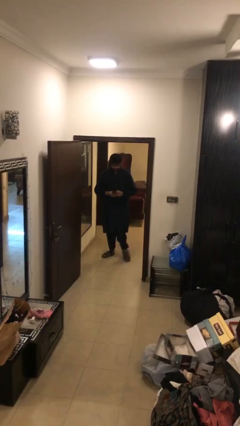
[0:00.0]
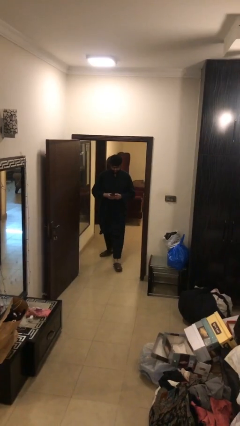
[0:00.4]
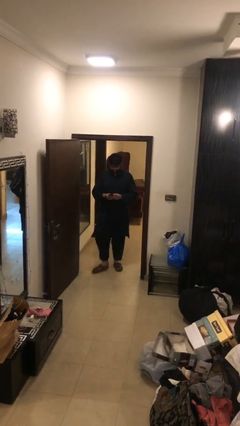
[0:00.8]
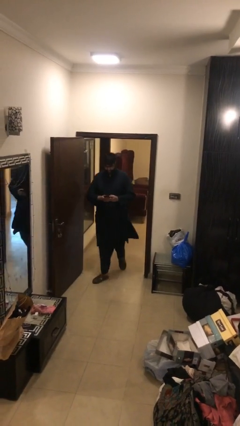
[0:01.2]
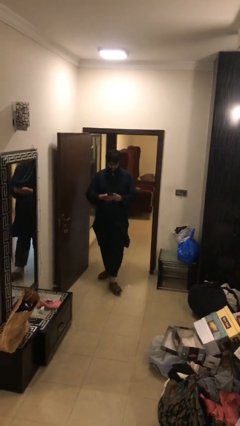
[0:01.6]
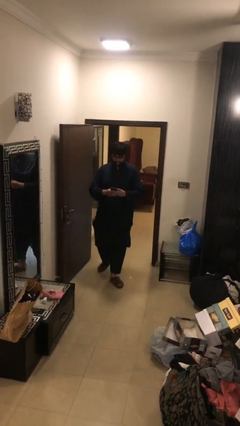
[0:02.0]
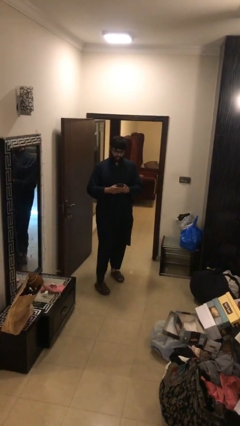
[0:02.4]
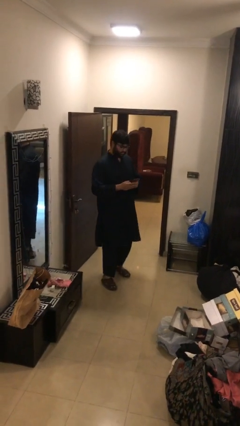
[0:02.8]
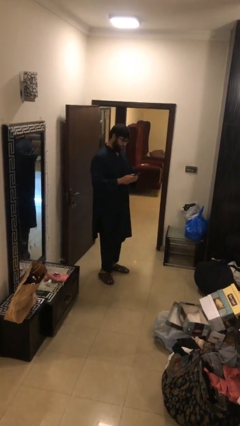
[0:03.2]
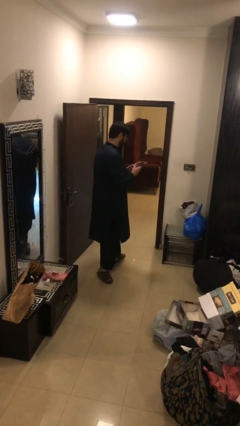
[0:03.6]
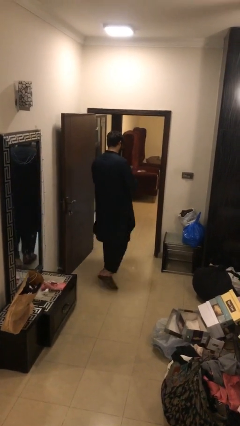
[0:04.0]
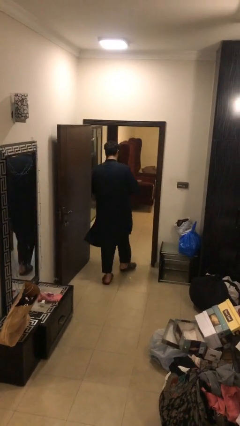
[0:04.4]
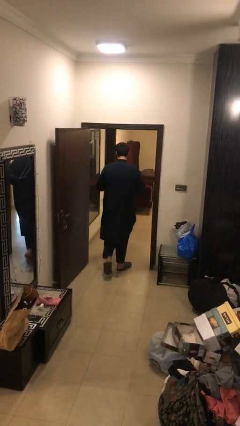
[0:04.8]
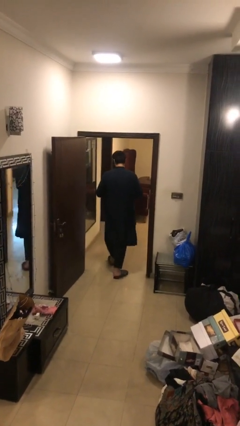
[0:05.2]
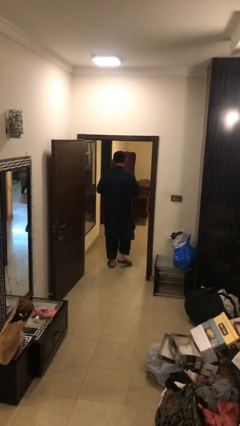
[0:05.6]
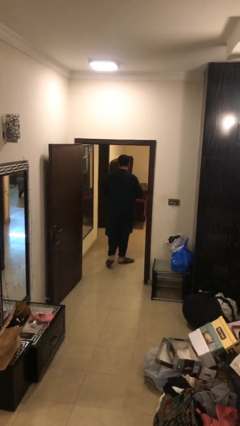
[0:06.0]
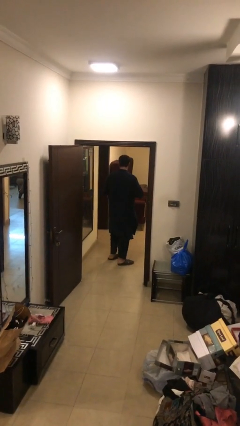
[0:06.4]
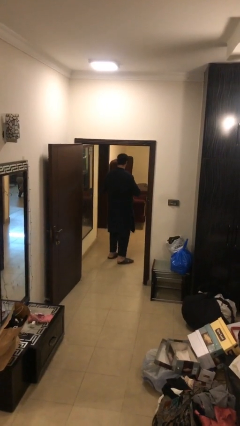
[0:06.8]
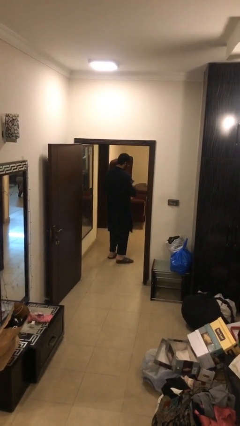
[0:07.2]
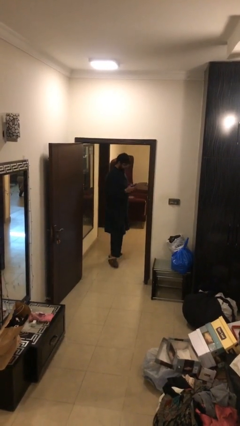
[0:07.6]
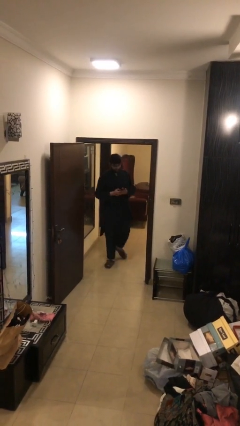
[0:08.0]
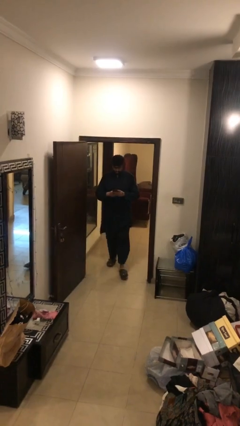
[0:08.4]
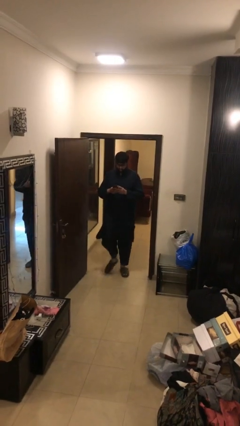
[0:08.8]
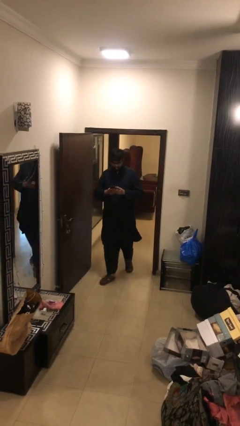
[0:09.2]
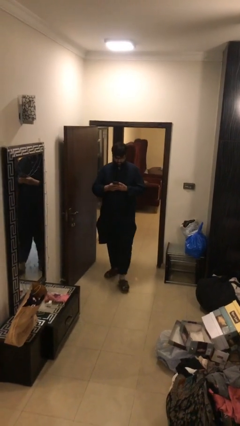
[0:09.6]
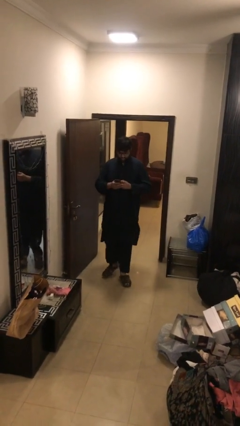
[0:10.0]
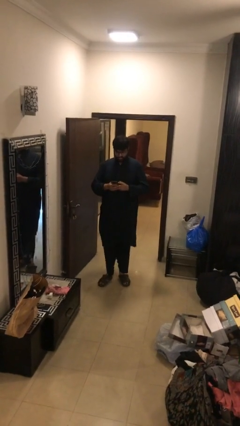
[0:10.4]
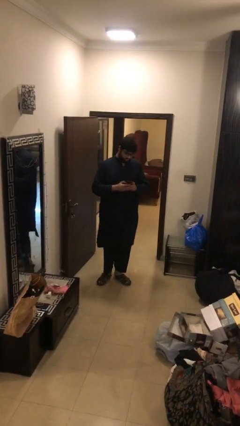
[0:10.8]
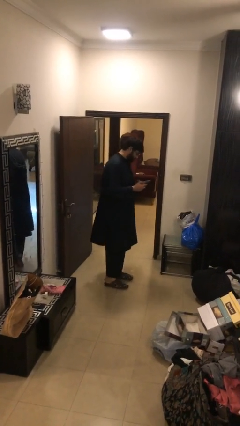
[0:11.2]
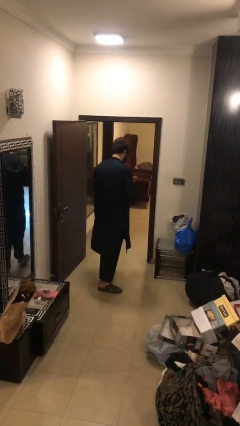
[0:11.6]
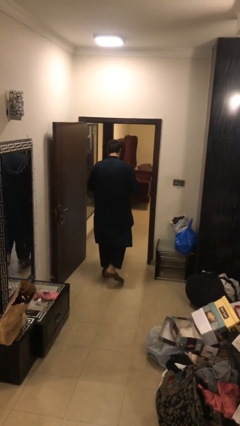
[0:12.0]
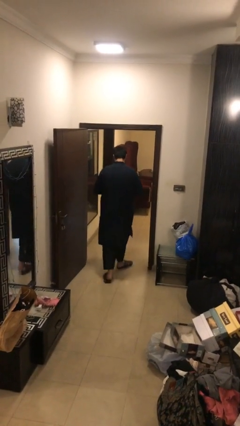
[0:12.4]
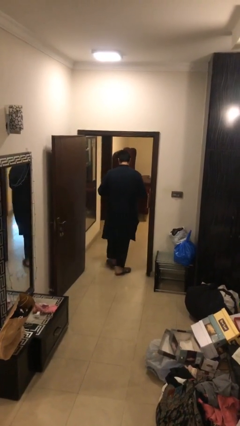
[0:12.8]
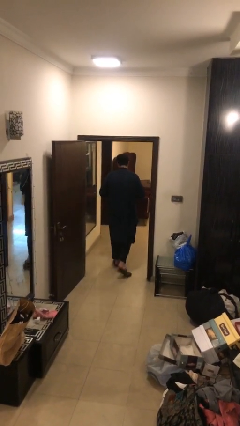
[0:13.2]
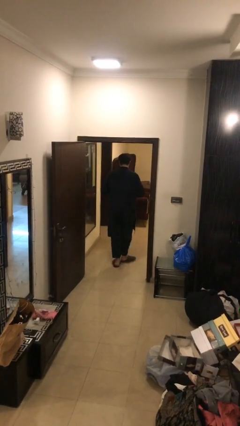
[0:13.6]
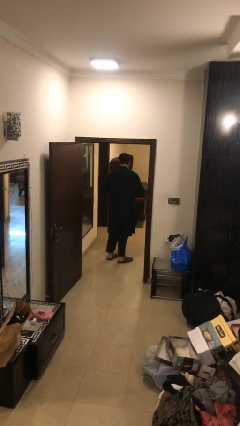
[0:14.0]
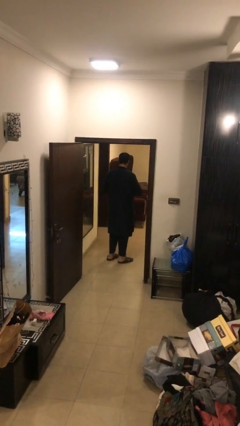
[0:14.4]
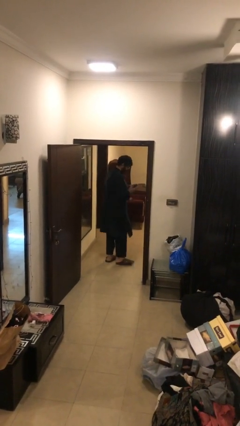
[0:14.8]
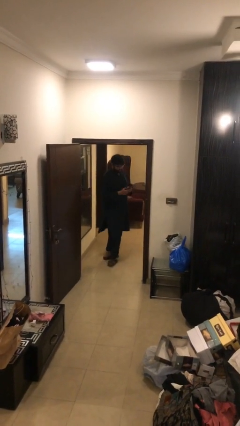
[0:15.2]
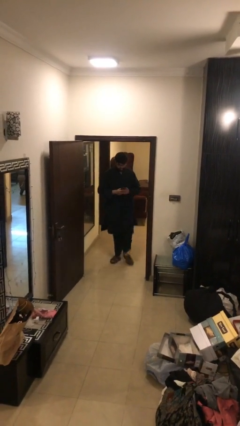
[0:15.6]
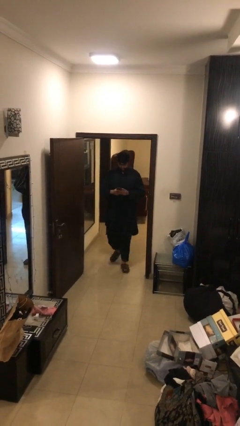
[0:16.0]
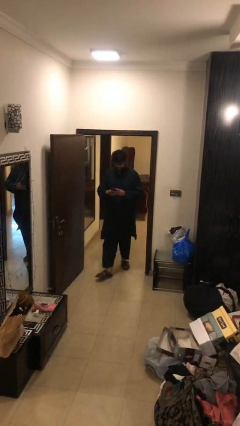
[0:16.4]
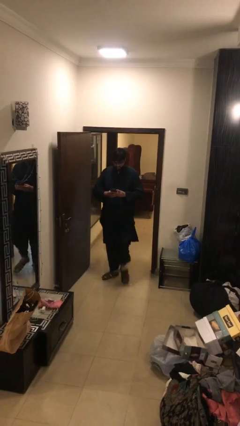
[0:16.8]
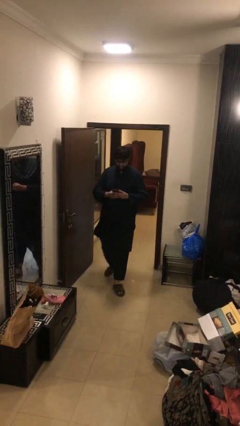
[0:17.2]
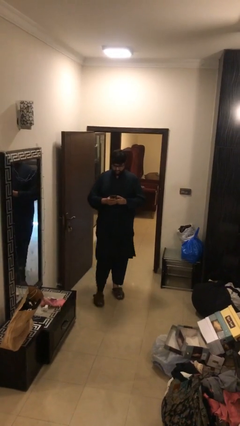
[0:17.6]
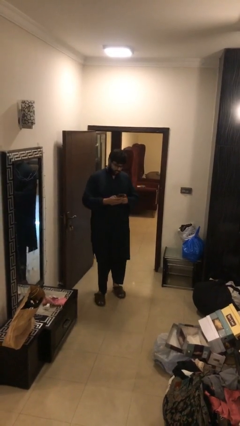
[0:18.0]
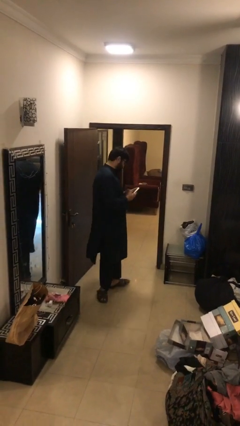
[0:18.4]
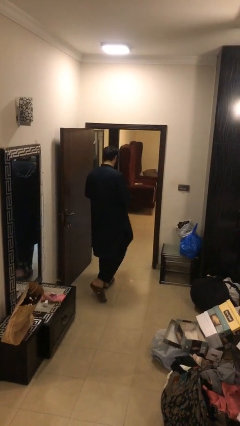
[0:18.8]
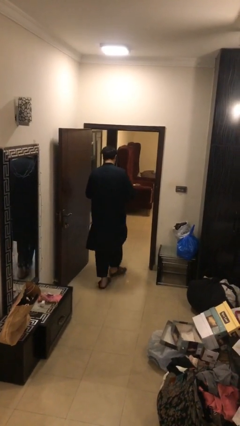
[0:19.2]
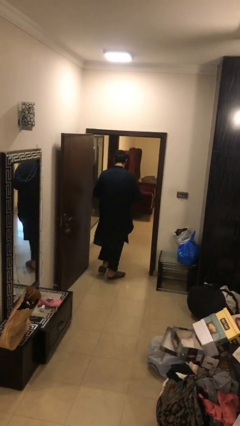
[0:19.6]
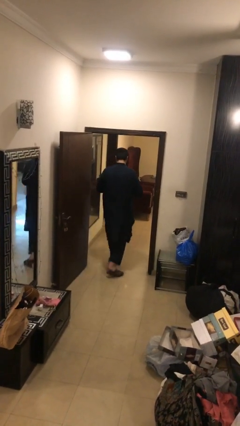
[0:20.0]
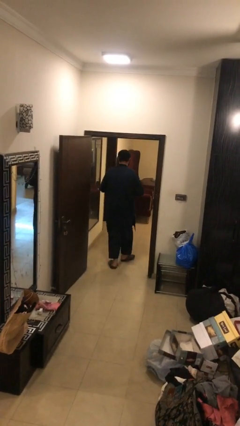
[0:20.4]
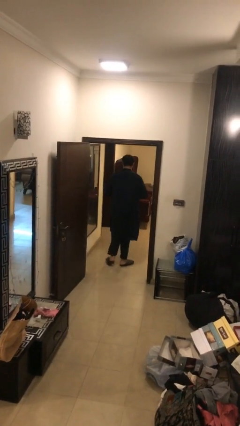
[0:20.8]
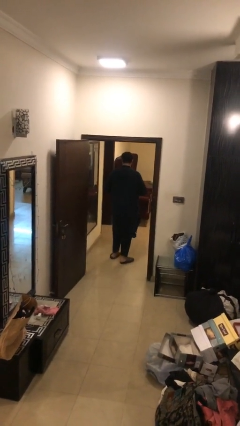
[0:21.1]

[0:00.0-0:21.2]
person texts on phone

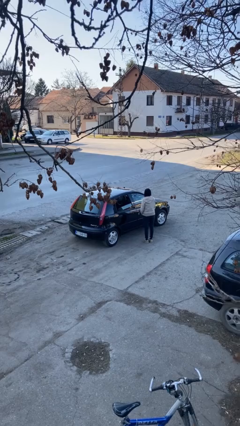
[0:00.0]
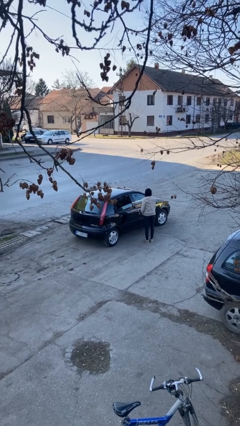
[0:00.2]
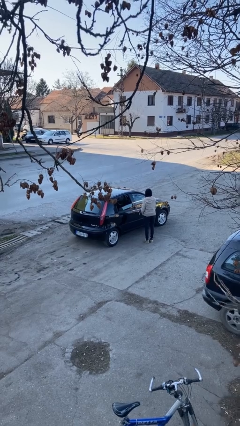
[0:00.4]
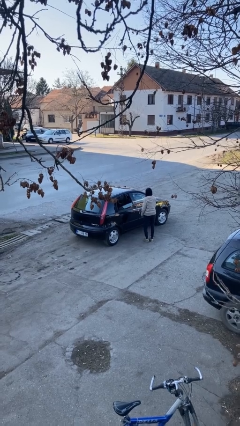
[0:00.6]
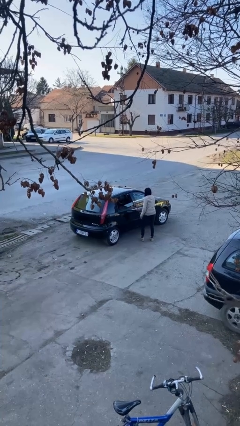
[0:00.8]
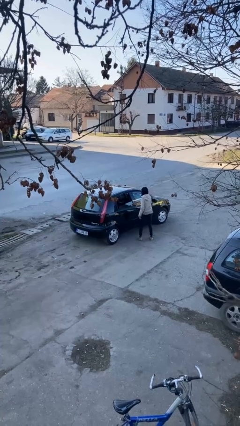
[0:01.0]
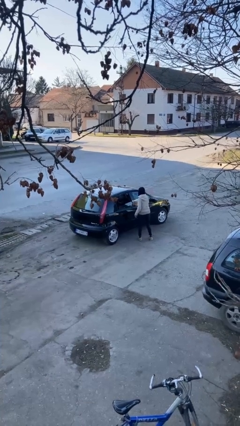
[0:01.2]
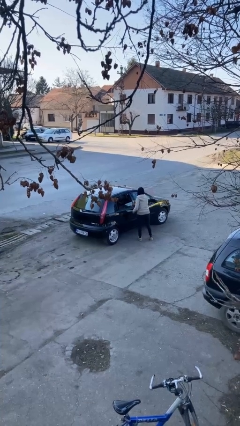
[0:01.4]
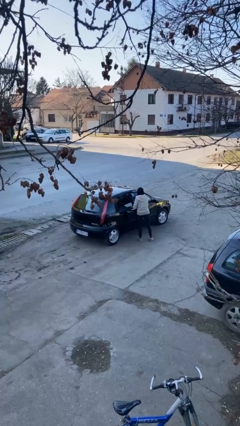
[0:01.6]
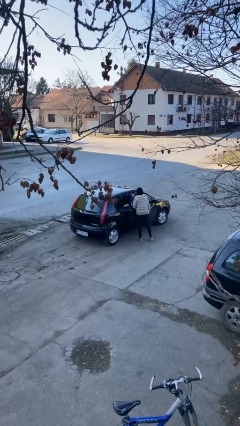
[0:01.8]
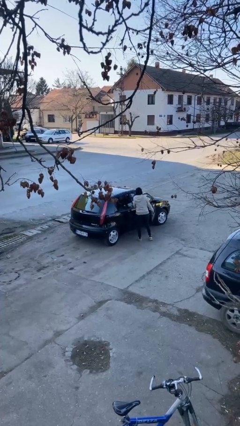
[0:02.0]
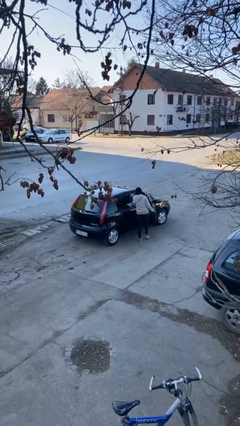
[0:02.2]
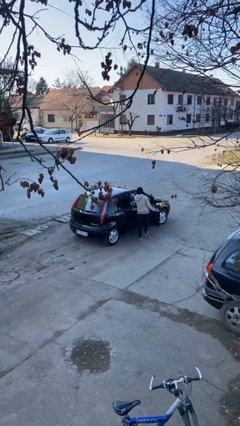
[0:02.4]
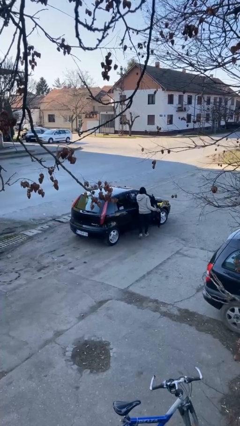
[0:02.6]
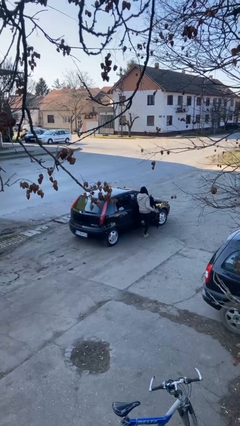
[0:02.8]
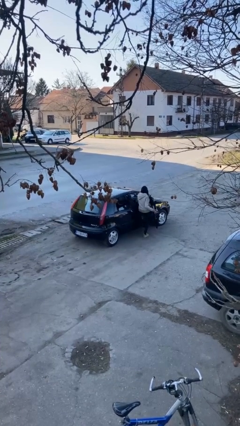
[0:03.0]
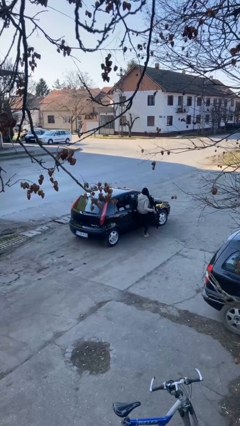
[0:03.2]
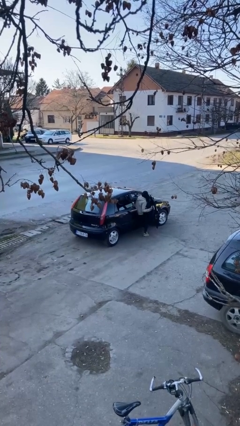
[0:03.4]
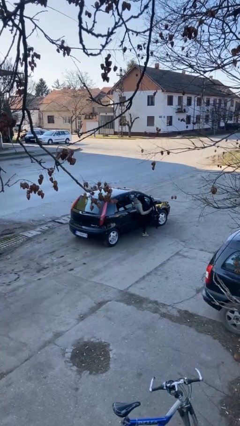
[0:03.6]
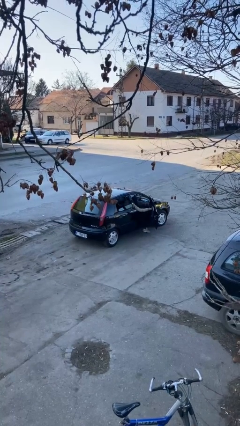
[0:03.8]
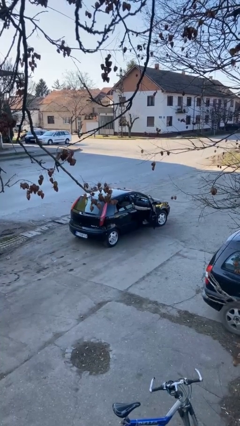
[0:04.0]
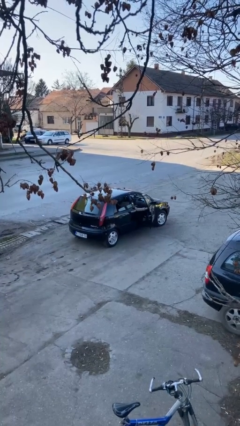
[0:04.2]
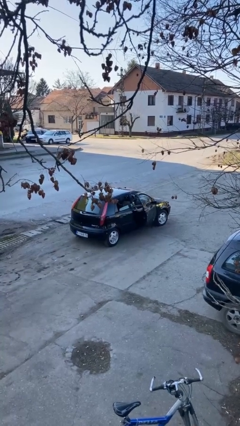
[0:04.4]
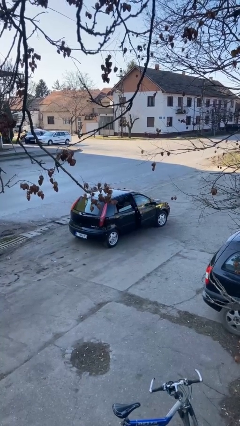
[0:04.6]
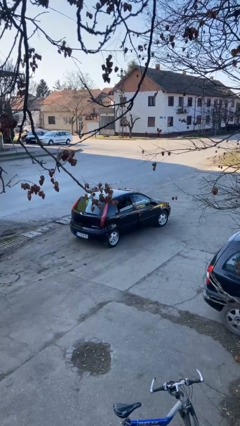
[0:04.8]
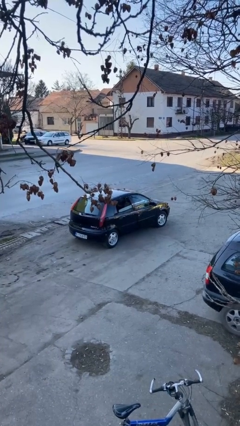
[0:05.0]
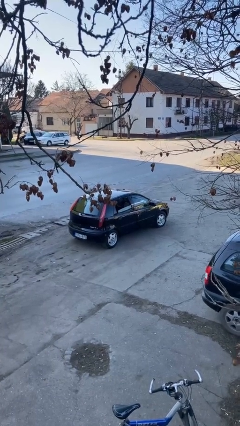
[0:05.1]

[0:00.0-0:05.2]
car picks up person

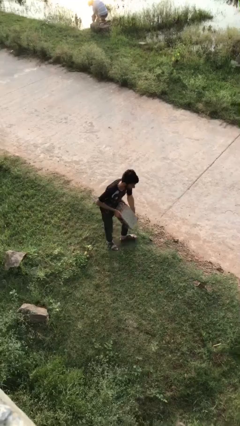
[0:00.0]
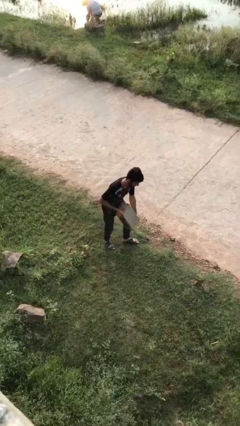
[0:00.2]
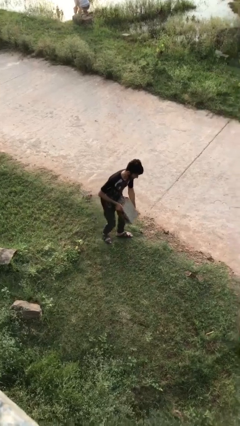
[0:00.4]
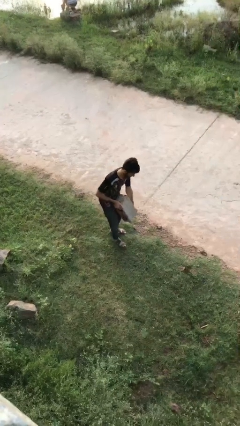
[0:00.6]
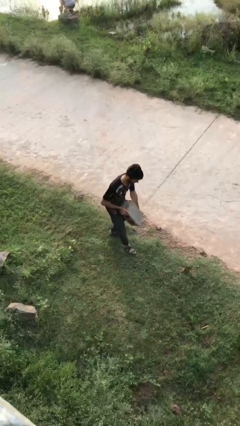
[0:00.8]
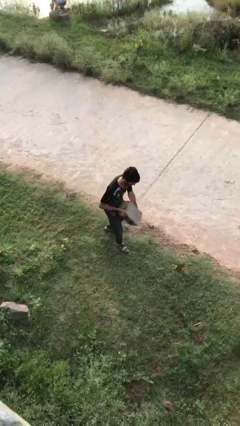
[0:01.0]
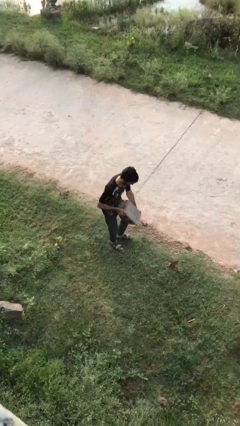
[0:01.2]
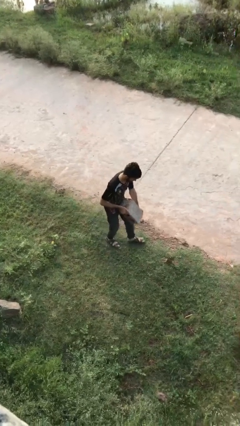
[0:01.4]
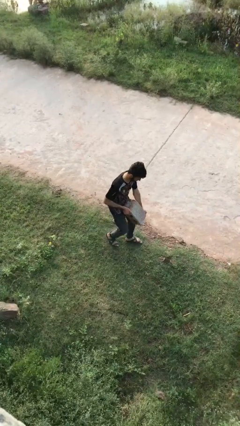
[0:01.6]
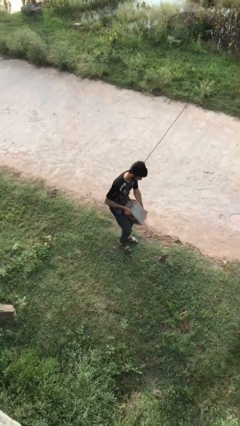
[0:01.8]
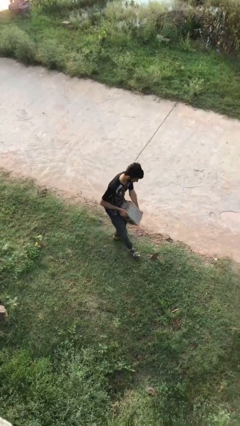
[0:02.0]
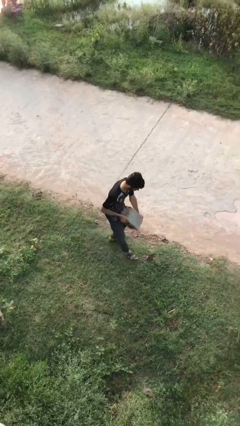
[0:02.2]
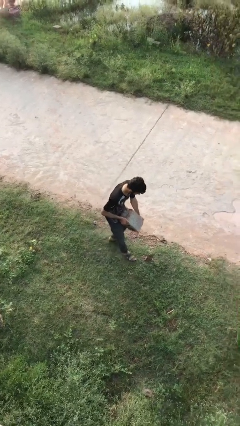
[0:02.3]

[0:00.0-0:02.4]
person carries heavy object
